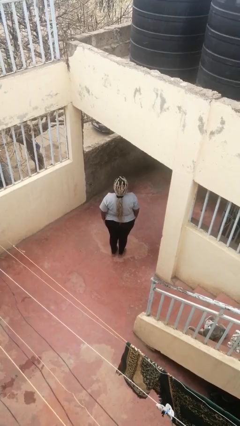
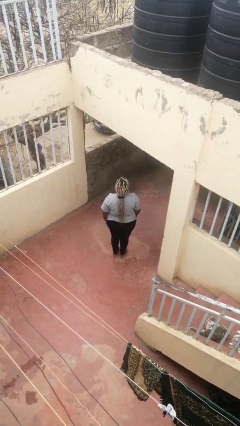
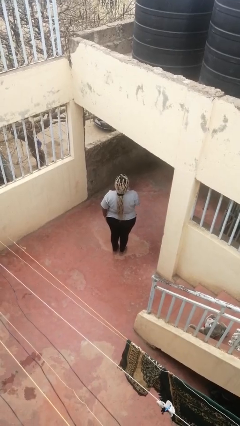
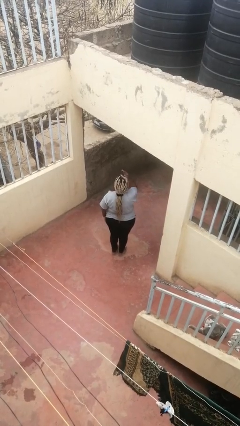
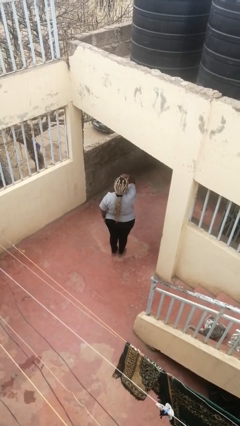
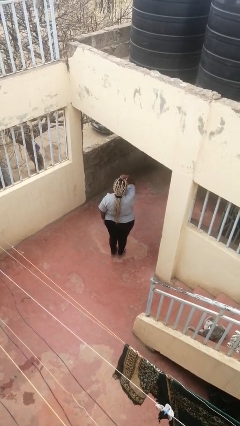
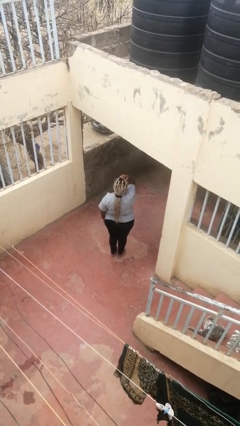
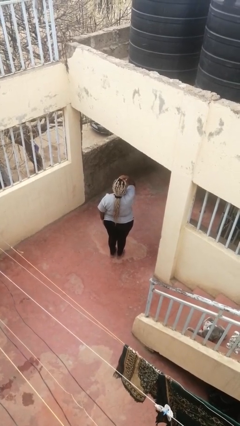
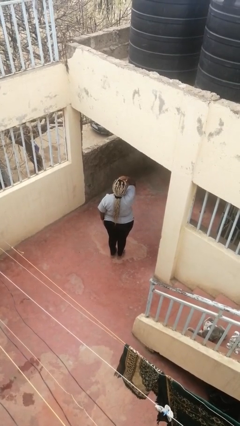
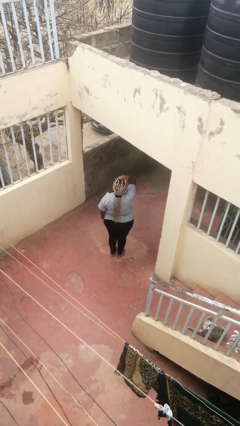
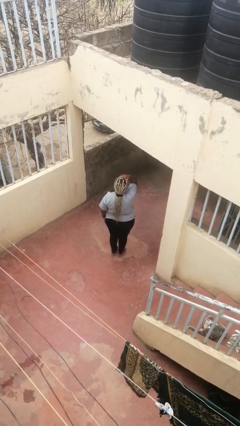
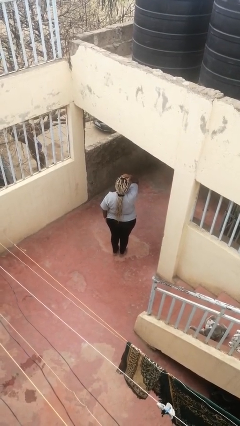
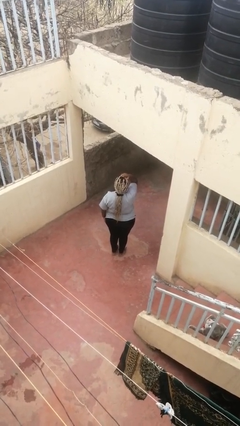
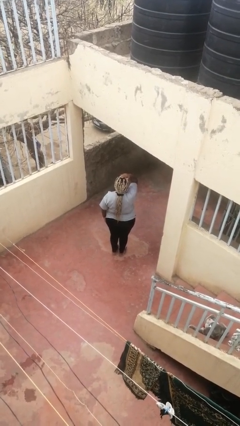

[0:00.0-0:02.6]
person pats head

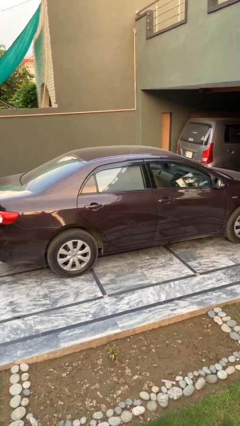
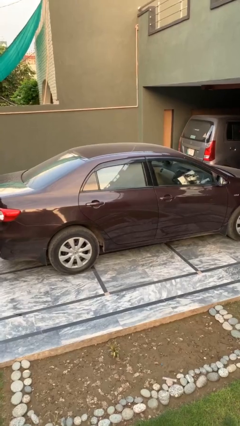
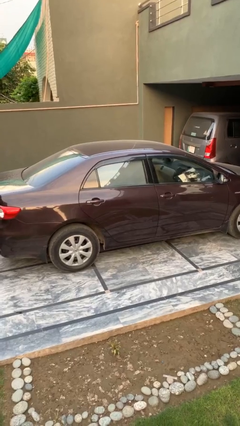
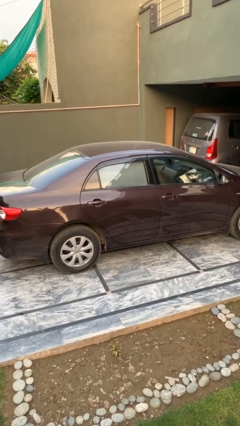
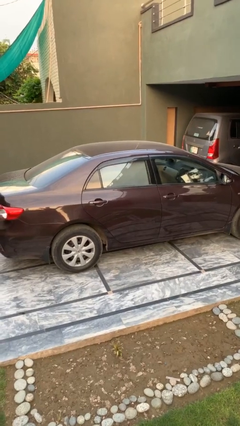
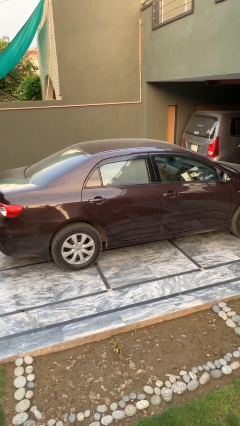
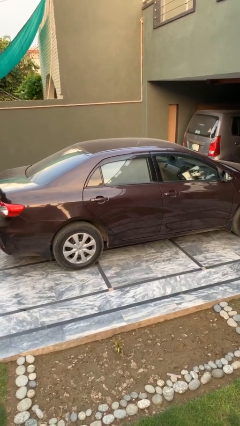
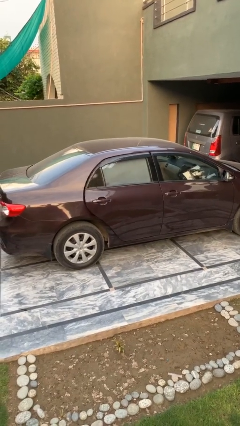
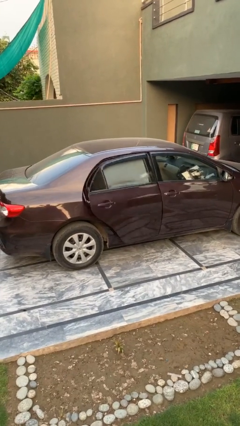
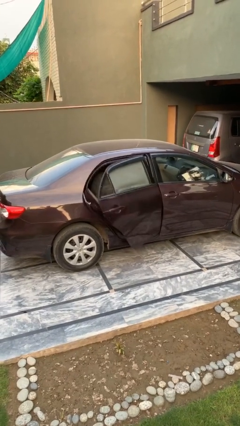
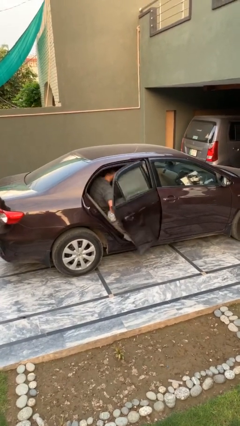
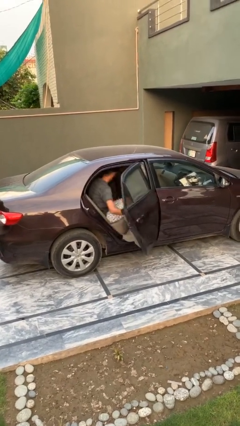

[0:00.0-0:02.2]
person opens car door

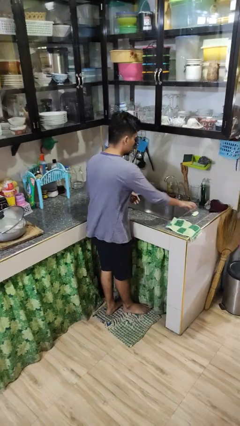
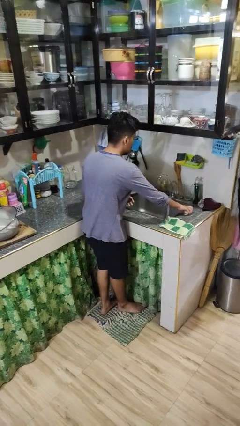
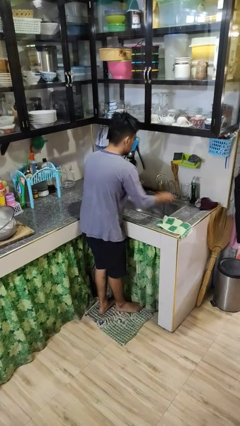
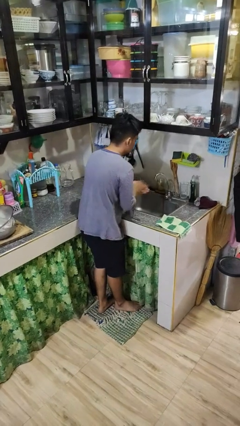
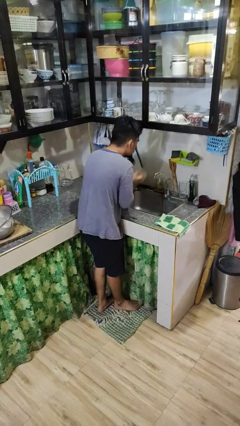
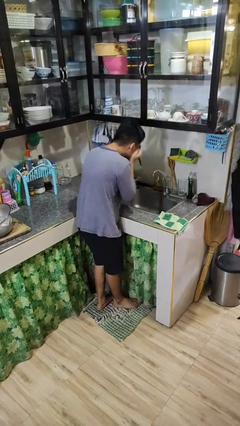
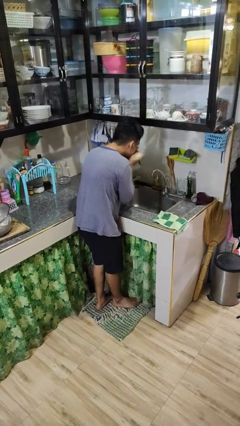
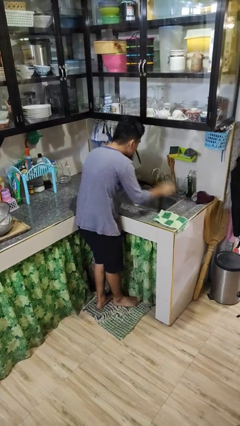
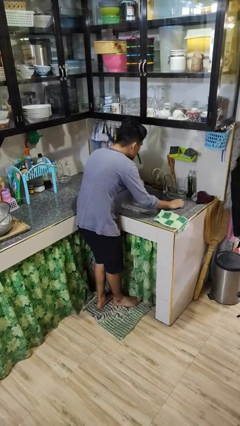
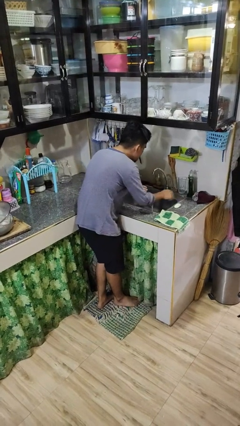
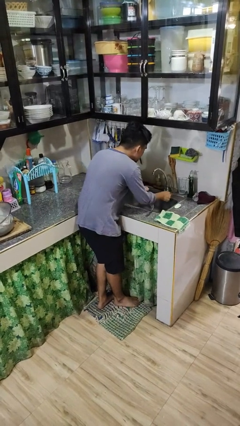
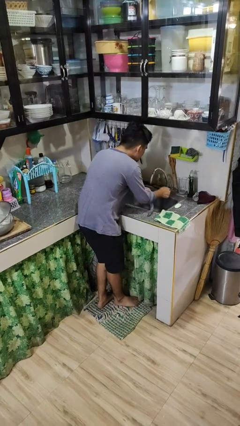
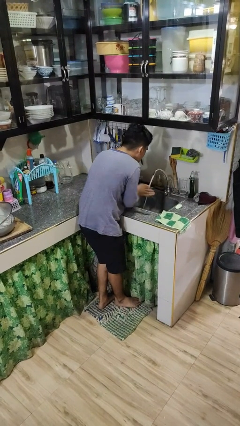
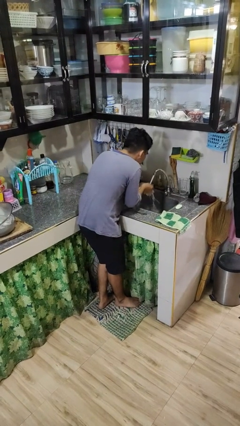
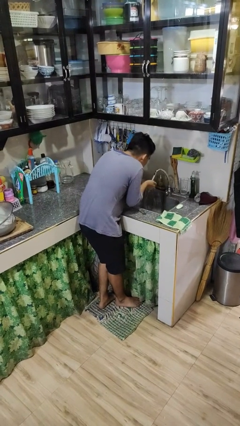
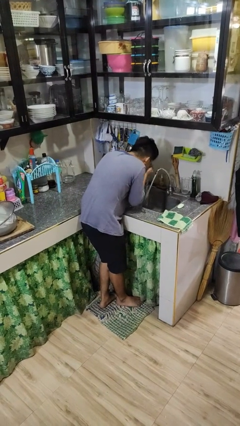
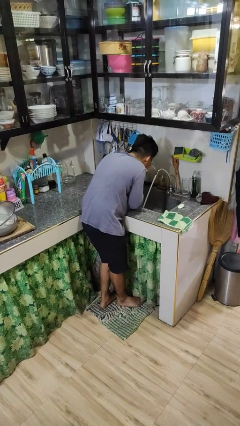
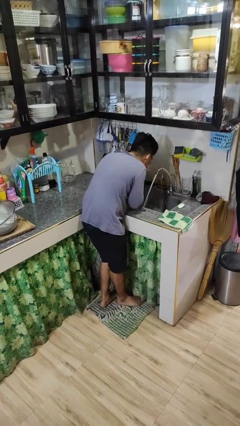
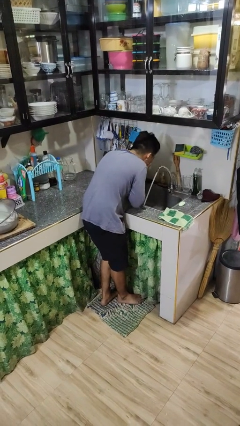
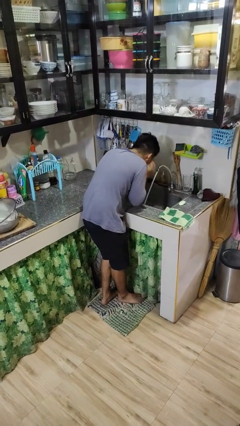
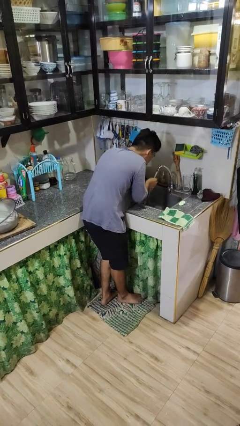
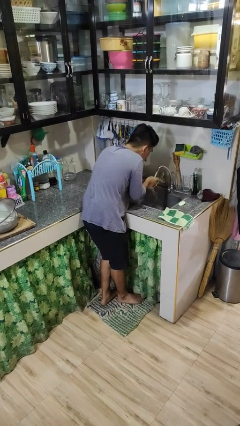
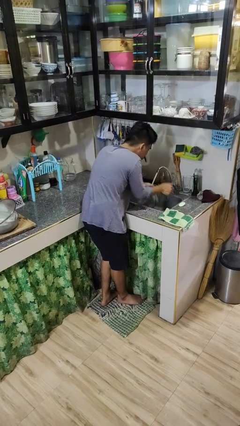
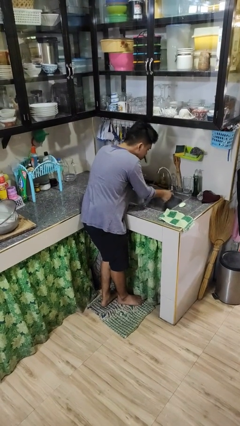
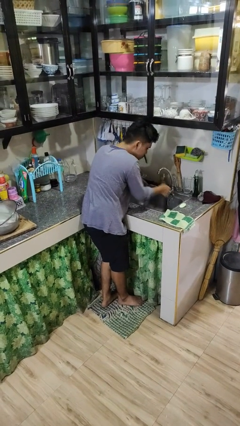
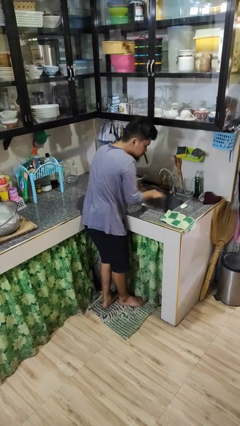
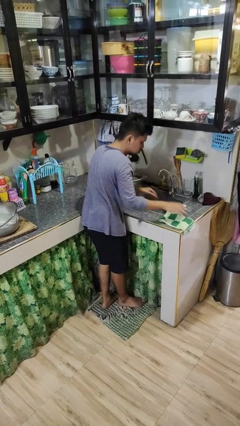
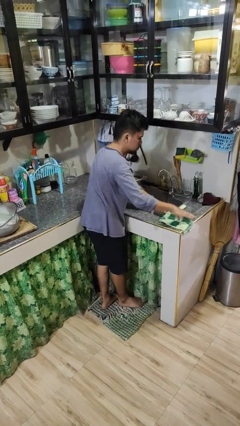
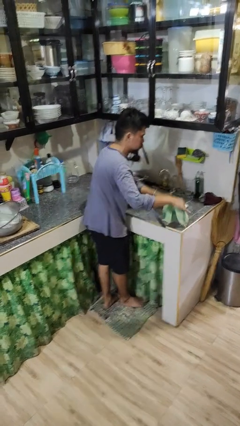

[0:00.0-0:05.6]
person washes face

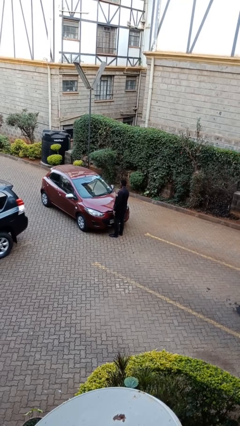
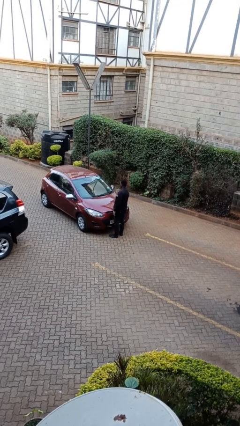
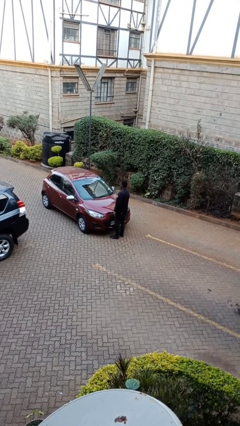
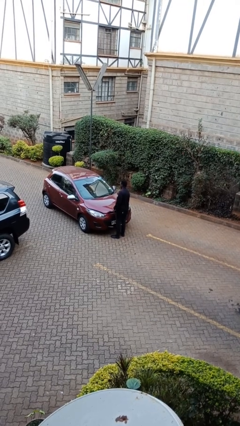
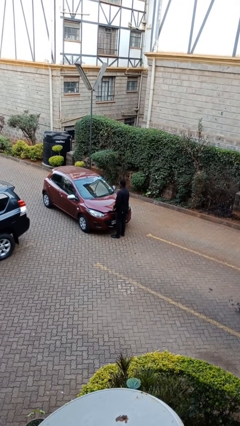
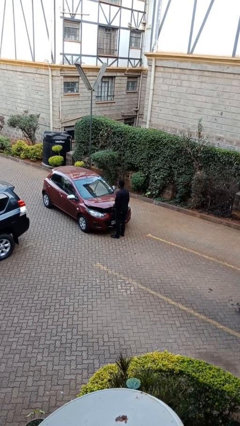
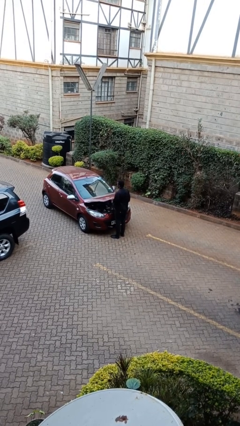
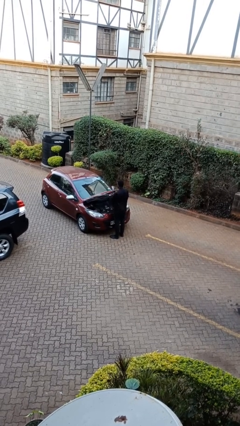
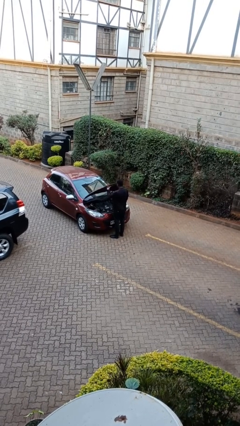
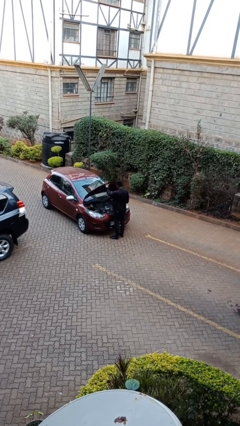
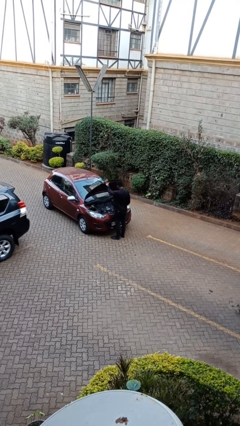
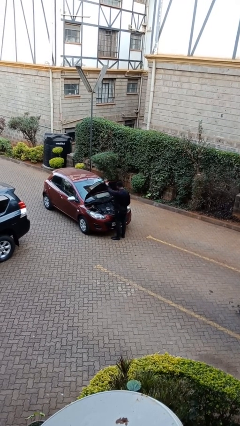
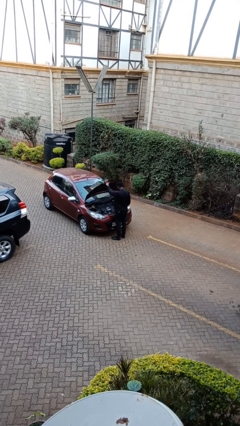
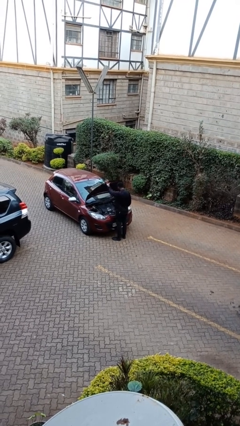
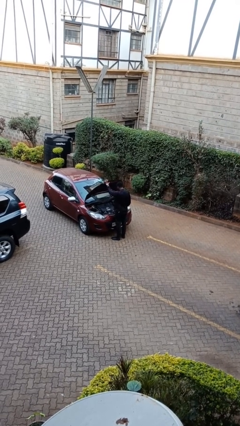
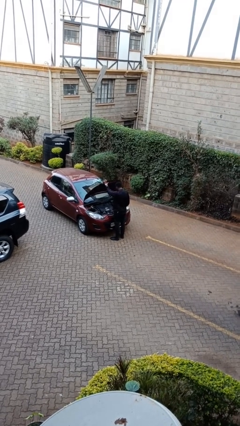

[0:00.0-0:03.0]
person opens car hood

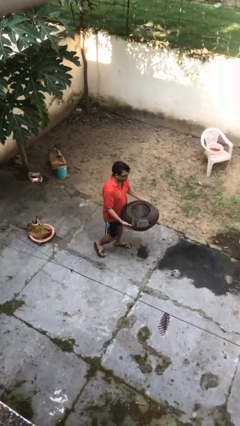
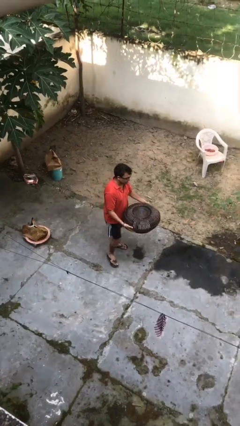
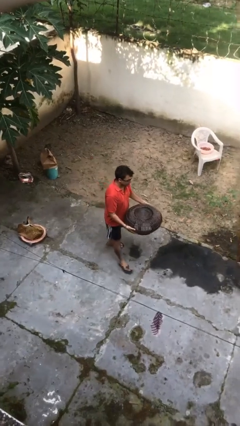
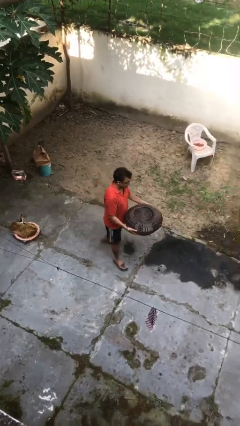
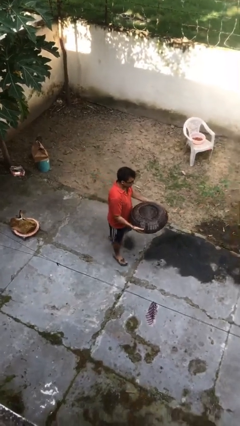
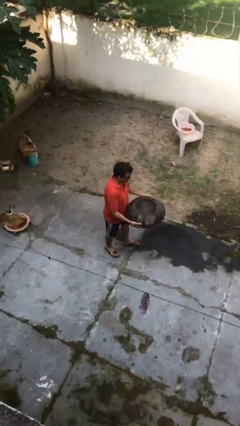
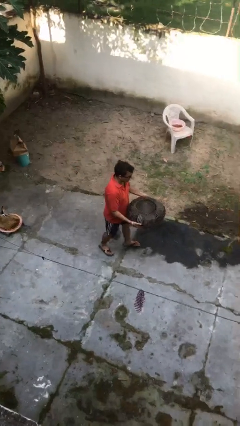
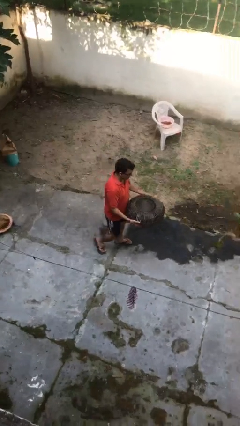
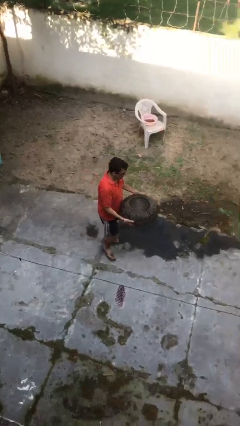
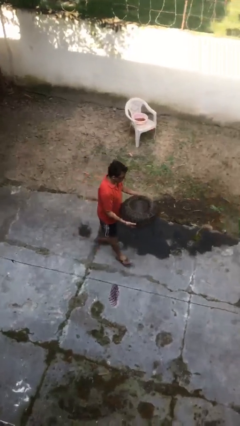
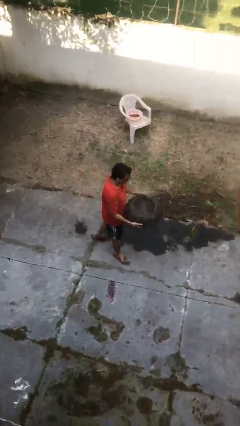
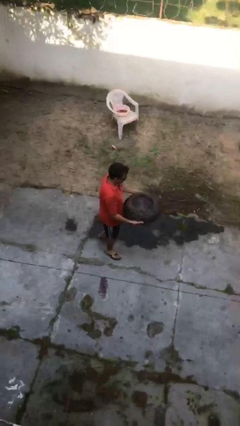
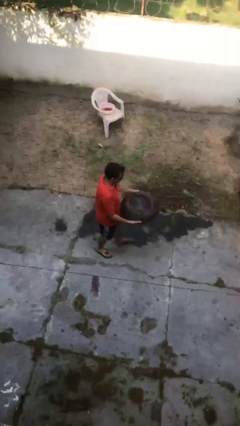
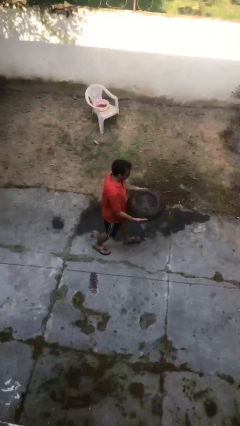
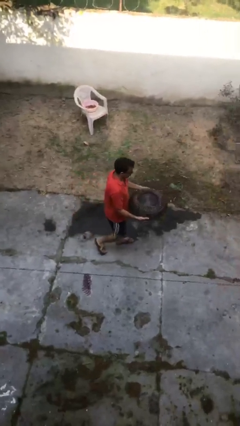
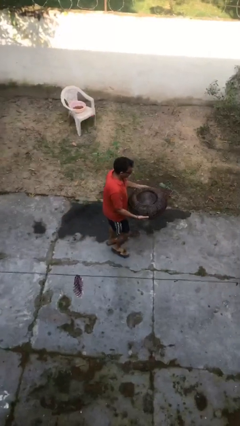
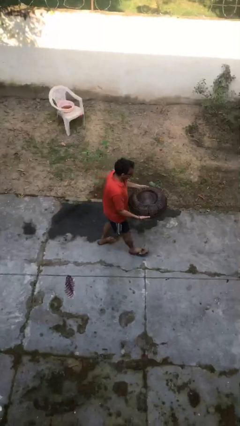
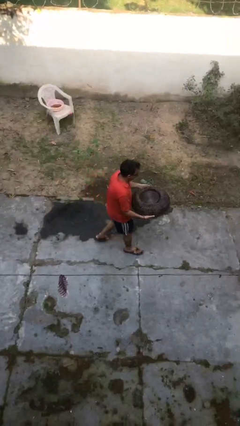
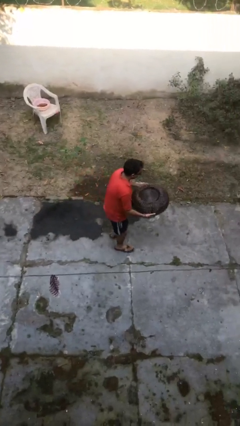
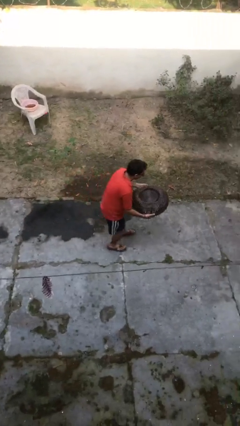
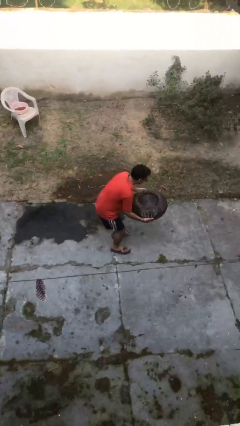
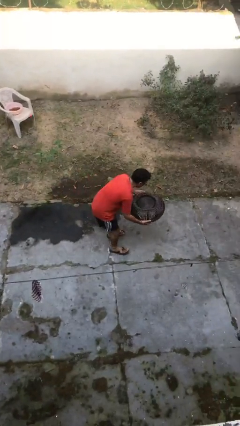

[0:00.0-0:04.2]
person carries heavy object
